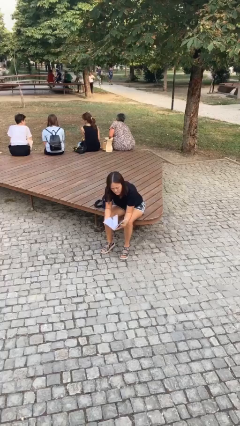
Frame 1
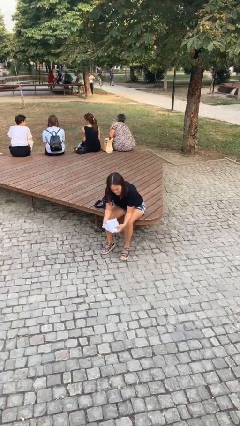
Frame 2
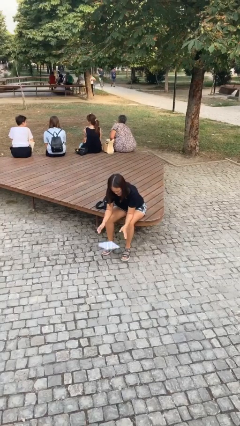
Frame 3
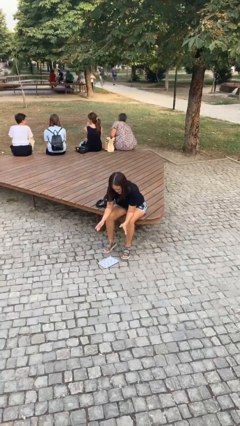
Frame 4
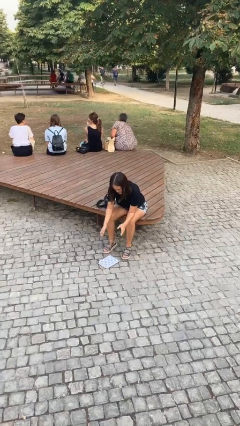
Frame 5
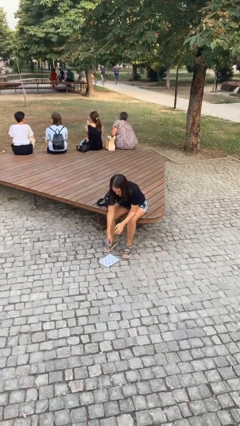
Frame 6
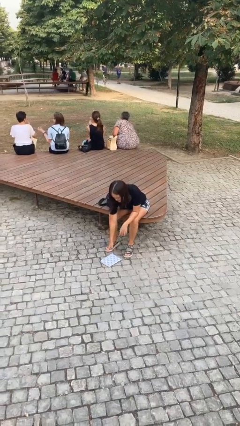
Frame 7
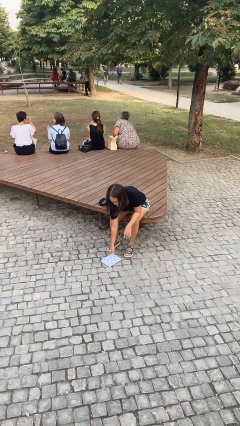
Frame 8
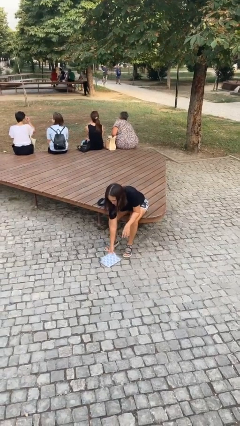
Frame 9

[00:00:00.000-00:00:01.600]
person drops object

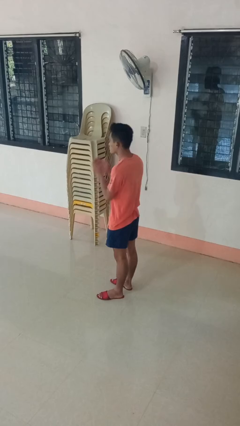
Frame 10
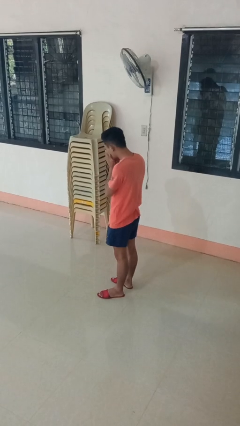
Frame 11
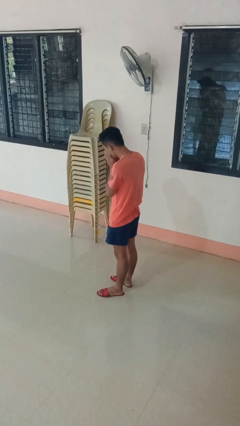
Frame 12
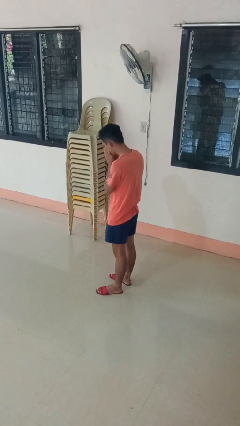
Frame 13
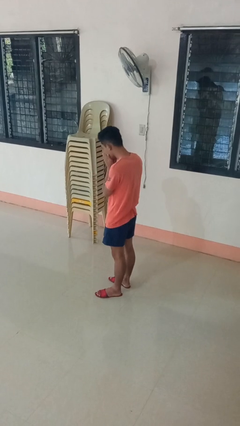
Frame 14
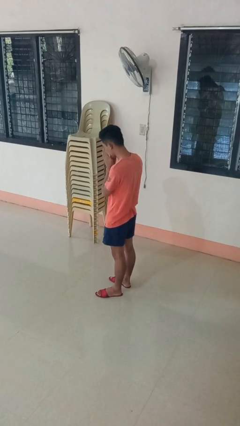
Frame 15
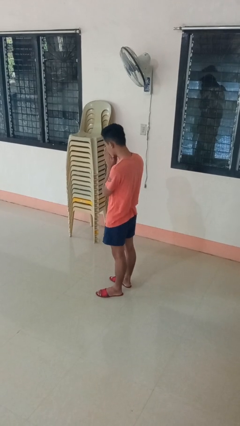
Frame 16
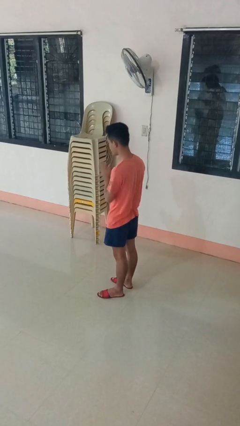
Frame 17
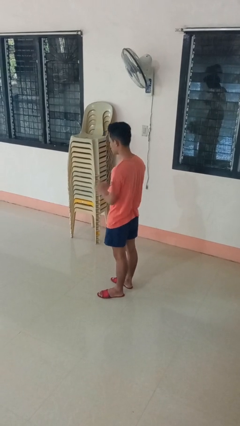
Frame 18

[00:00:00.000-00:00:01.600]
person sneezes into hand

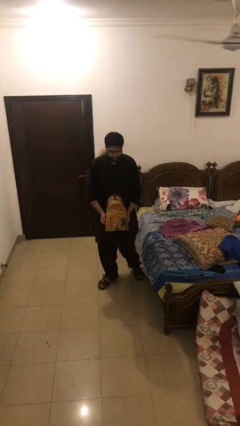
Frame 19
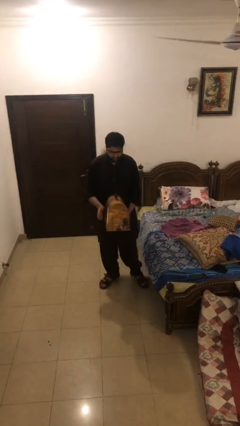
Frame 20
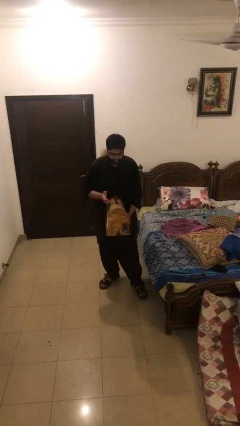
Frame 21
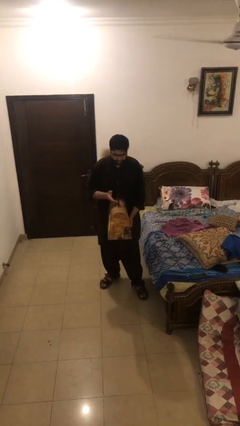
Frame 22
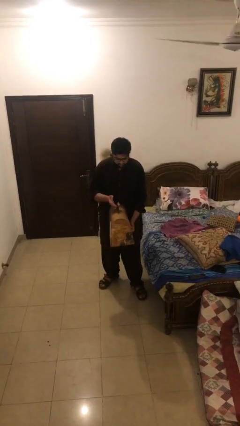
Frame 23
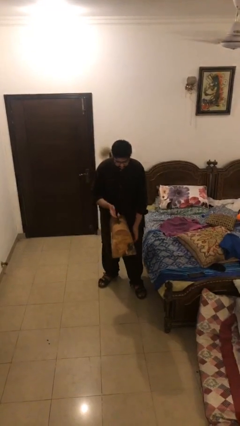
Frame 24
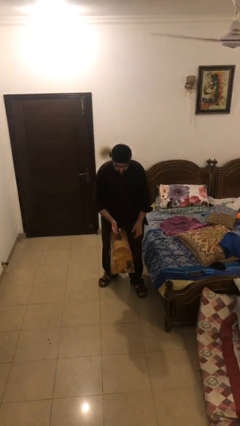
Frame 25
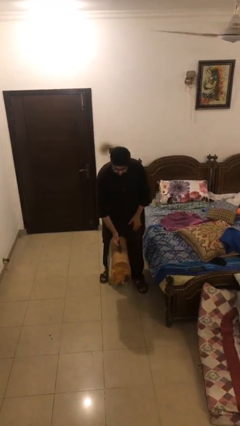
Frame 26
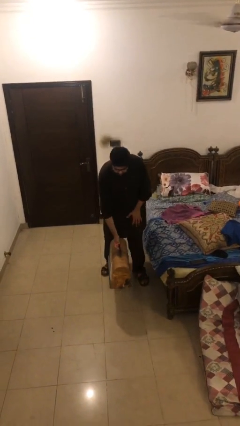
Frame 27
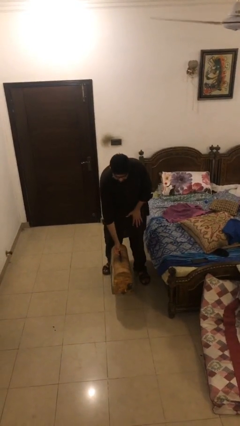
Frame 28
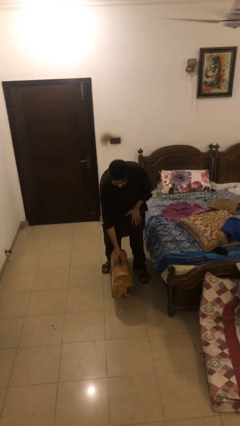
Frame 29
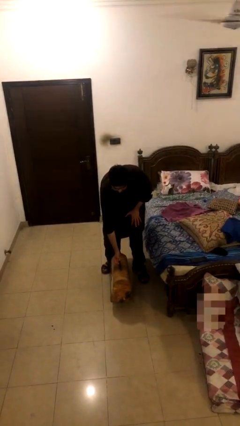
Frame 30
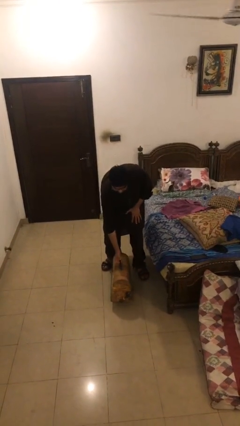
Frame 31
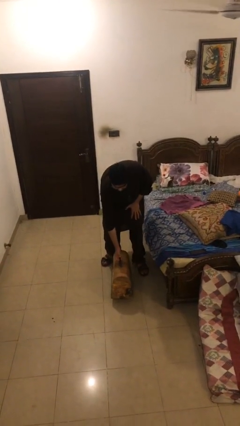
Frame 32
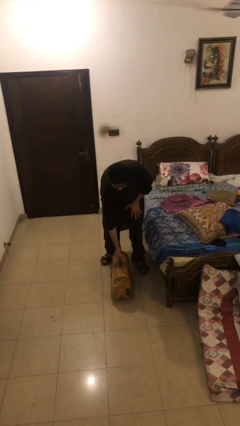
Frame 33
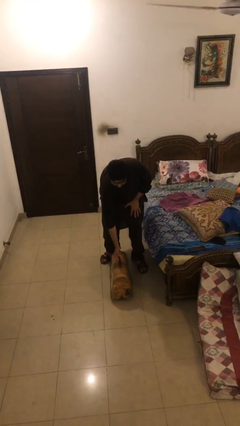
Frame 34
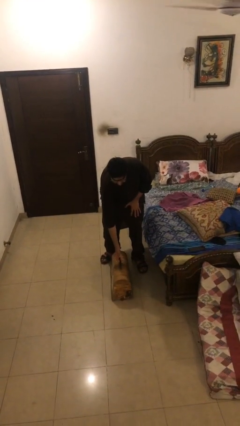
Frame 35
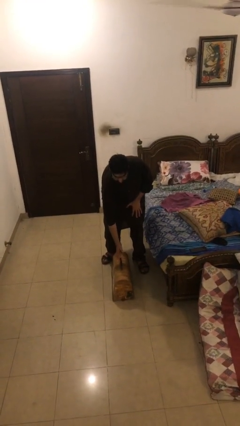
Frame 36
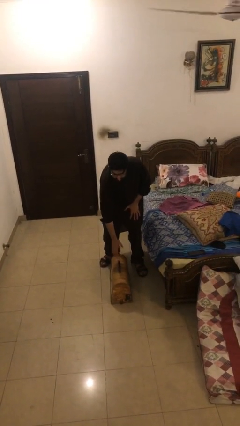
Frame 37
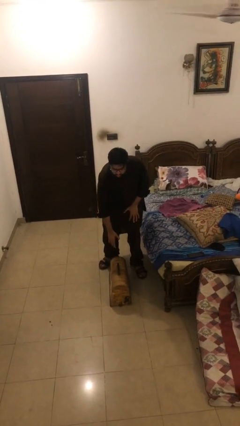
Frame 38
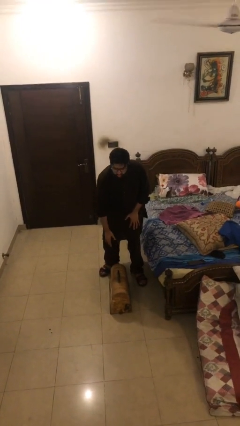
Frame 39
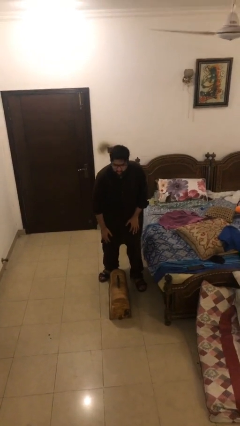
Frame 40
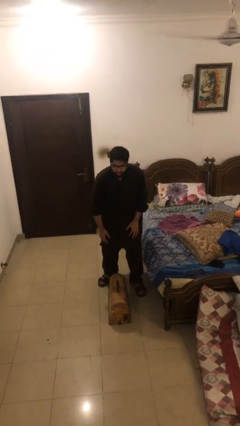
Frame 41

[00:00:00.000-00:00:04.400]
person puts down object on floor

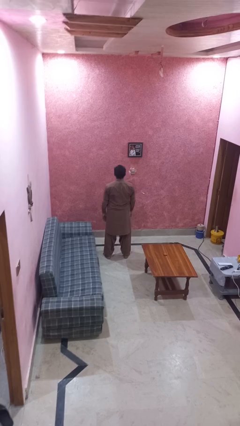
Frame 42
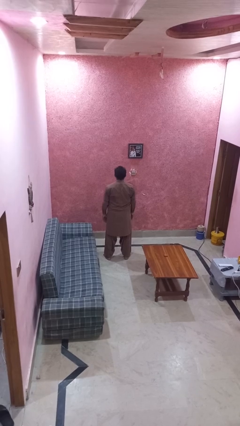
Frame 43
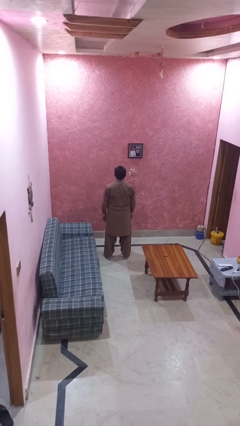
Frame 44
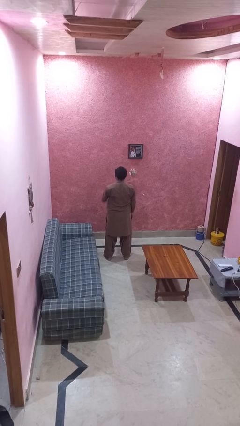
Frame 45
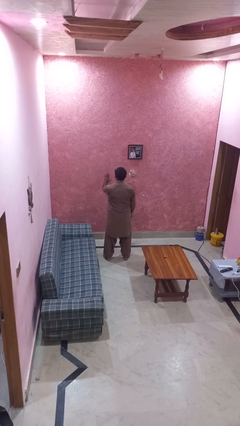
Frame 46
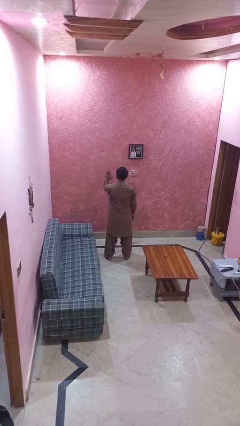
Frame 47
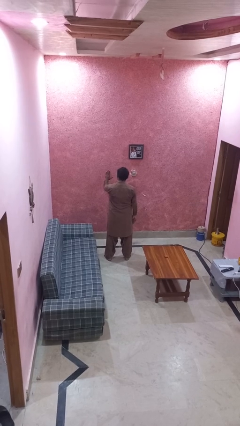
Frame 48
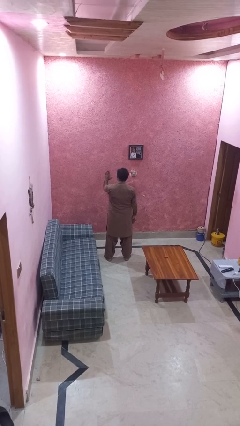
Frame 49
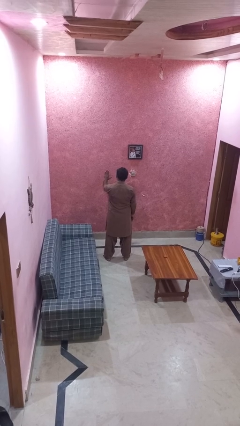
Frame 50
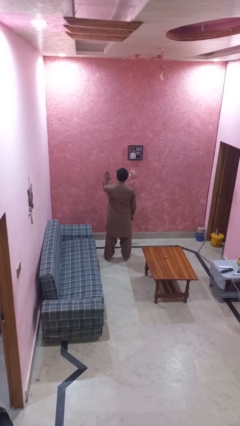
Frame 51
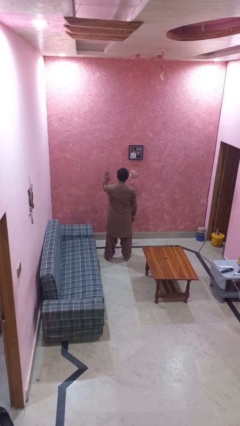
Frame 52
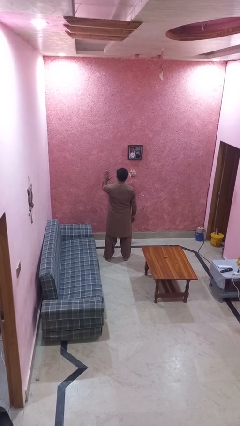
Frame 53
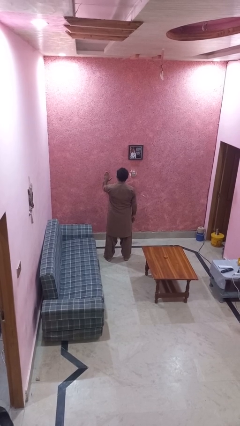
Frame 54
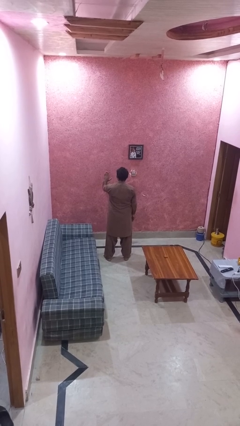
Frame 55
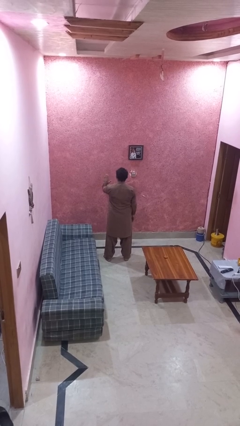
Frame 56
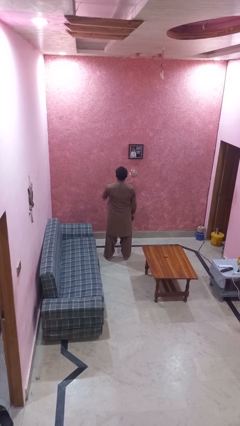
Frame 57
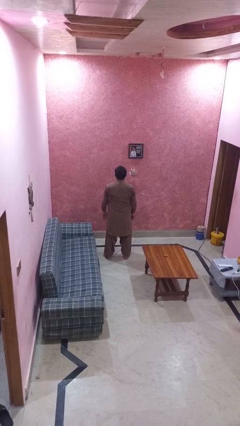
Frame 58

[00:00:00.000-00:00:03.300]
person gestures stop

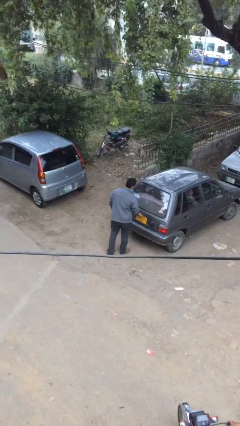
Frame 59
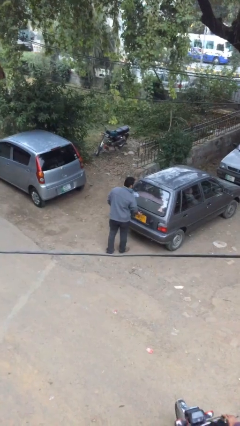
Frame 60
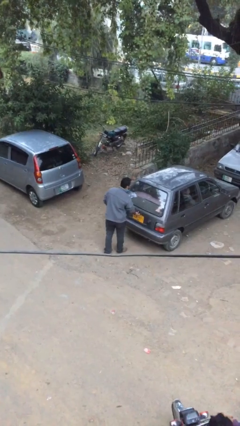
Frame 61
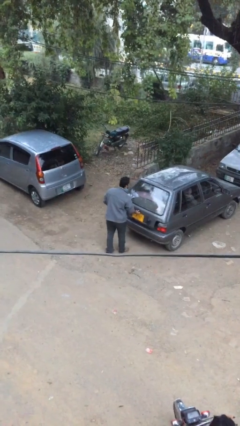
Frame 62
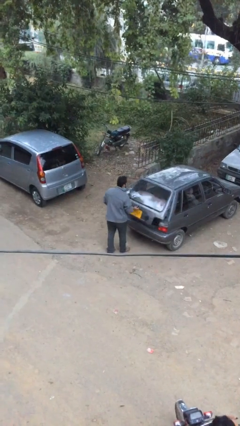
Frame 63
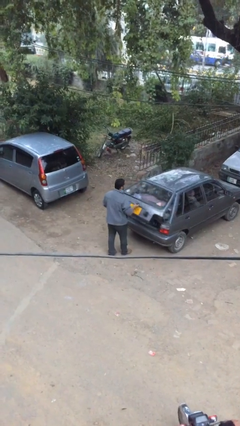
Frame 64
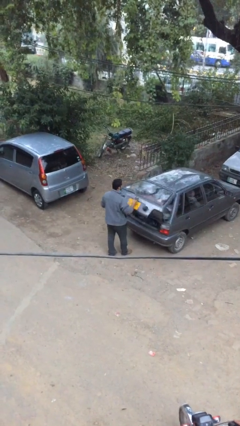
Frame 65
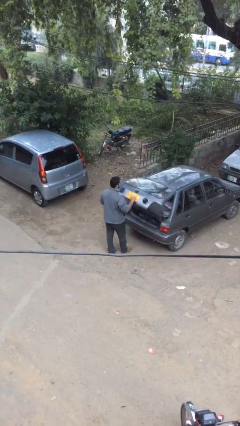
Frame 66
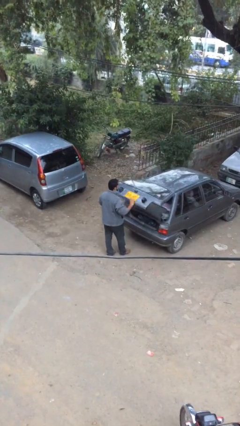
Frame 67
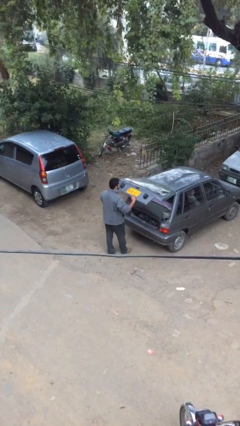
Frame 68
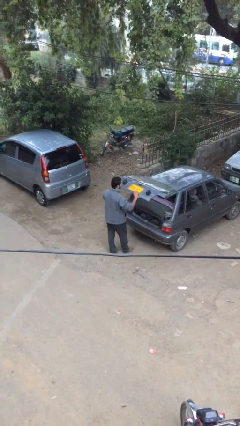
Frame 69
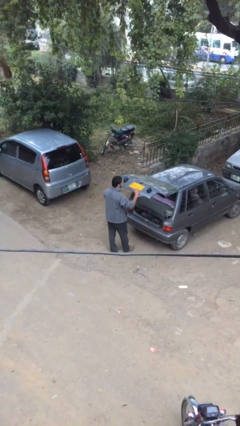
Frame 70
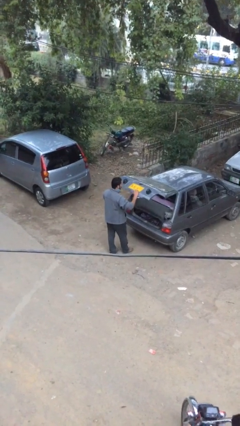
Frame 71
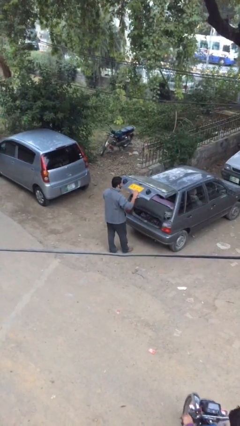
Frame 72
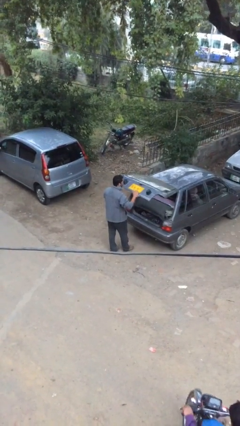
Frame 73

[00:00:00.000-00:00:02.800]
person opens car trunk

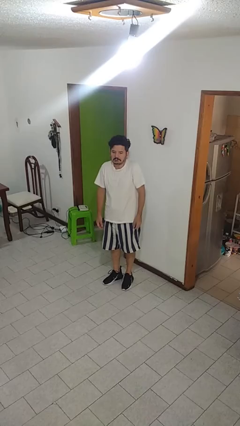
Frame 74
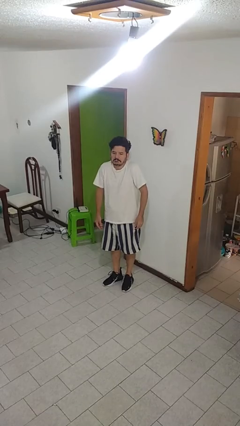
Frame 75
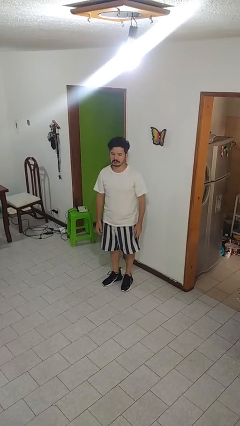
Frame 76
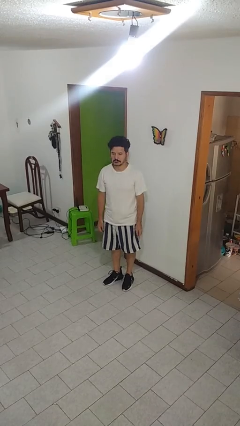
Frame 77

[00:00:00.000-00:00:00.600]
person shrugs

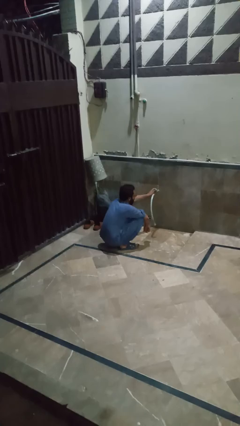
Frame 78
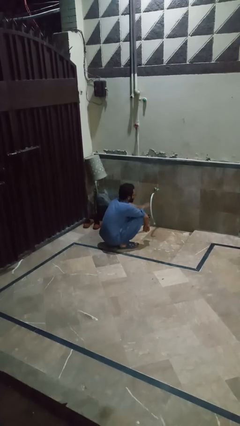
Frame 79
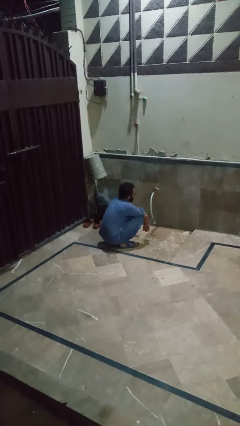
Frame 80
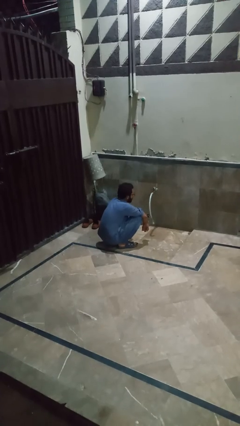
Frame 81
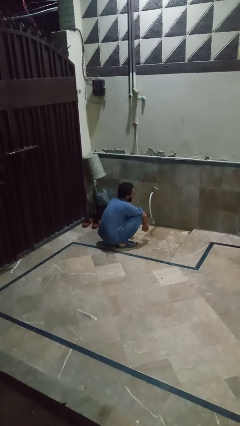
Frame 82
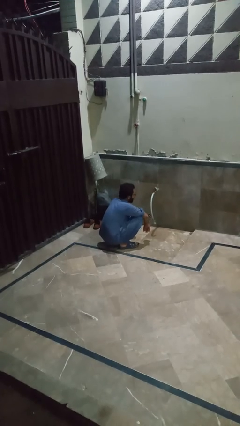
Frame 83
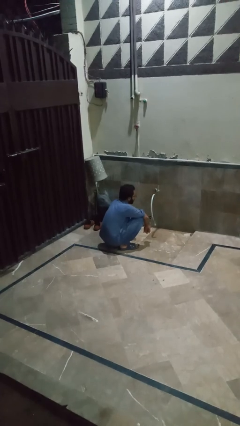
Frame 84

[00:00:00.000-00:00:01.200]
person turns off faucet

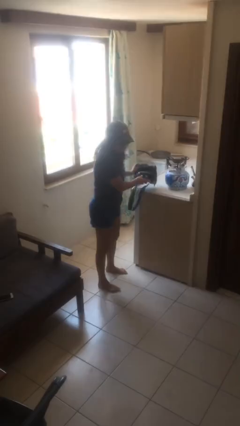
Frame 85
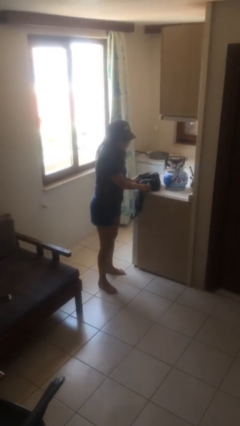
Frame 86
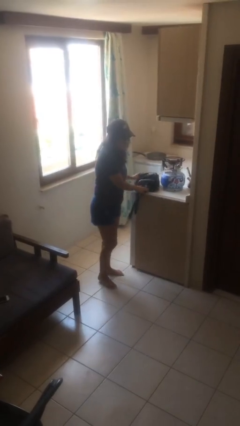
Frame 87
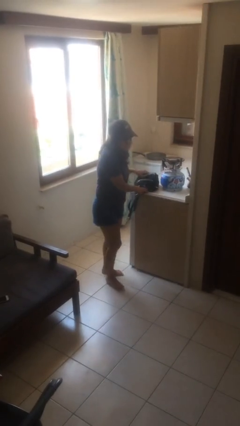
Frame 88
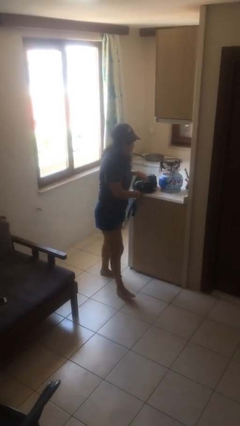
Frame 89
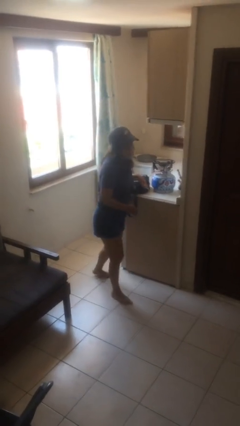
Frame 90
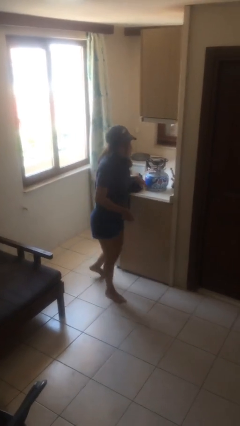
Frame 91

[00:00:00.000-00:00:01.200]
person puts down object on table

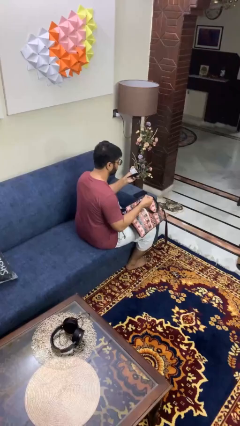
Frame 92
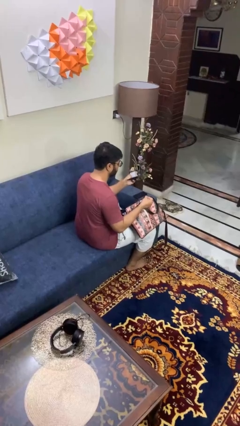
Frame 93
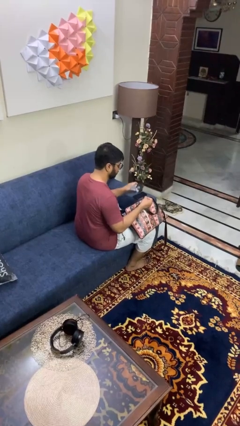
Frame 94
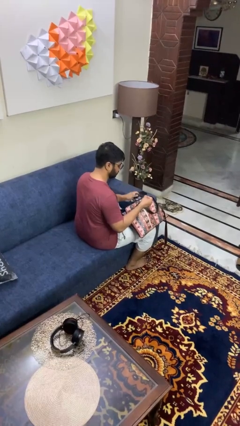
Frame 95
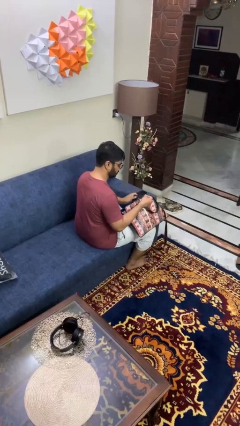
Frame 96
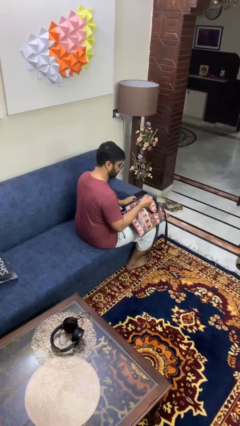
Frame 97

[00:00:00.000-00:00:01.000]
person puts object into purse
